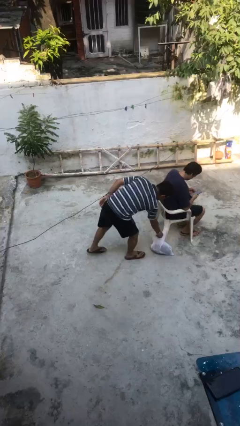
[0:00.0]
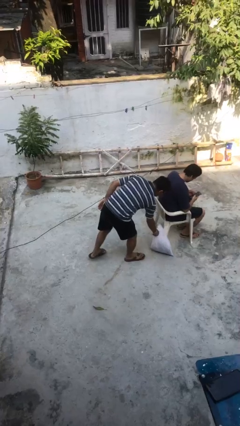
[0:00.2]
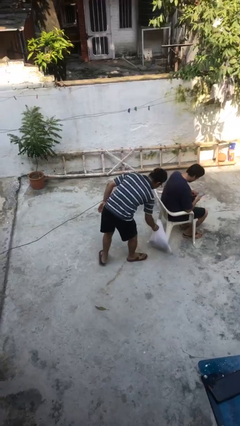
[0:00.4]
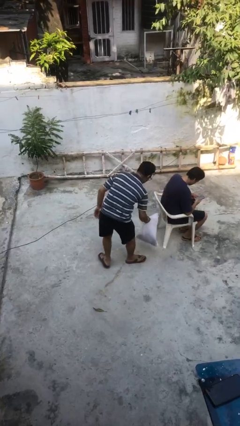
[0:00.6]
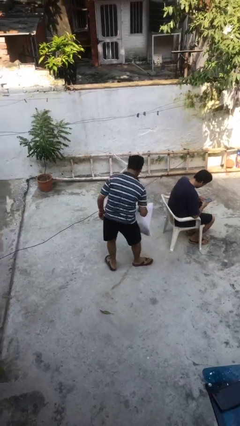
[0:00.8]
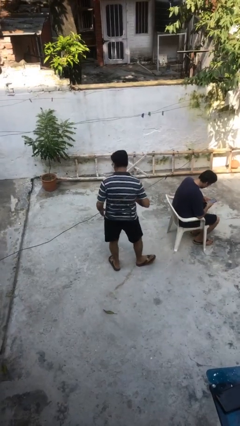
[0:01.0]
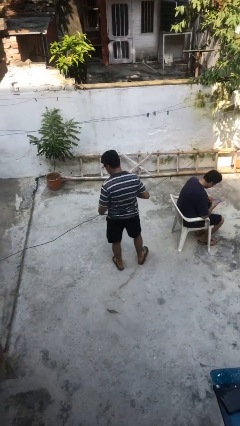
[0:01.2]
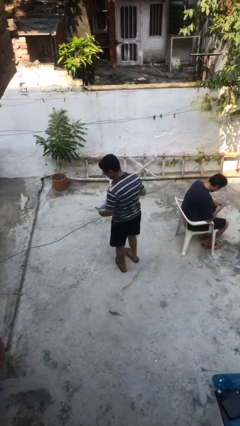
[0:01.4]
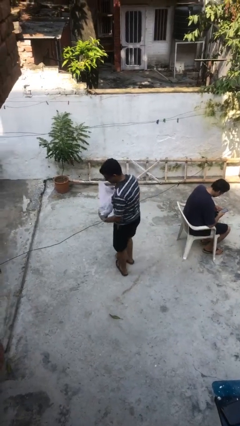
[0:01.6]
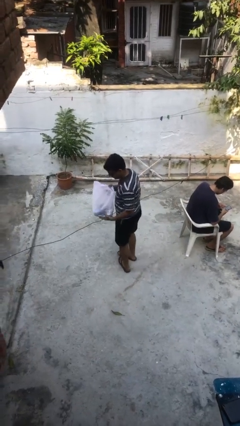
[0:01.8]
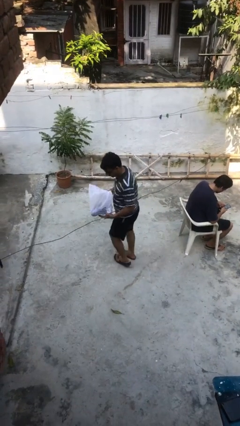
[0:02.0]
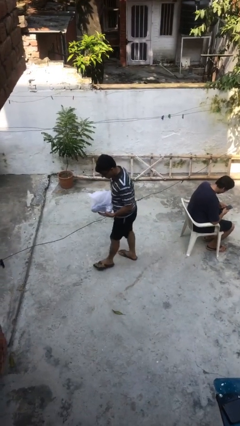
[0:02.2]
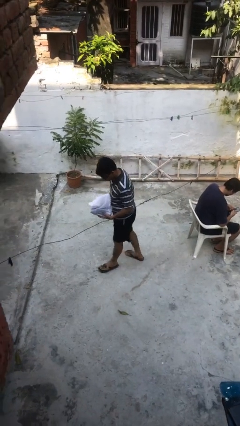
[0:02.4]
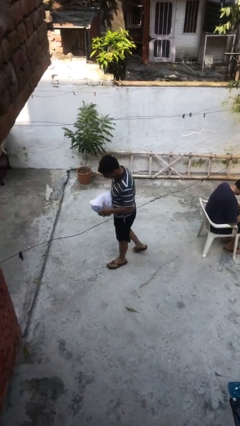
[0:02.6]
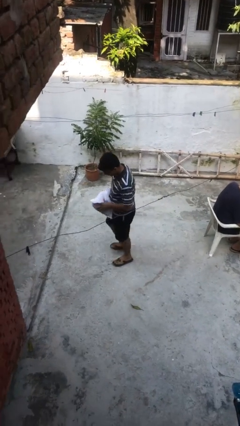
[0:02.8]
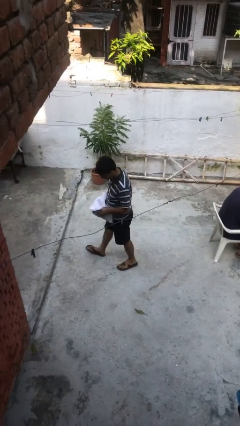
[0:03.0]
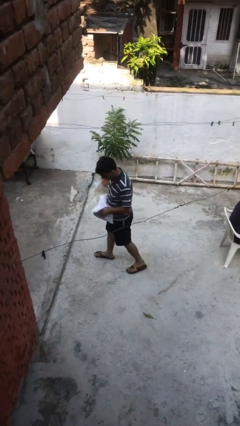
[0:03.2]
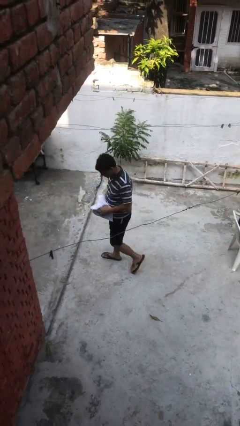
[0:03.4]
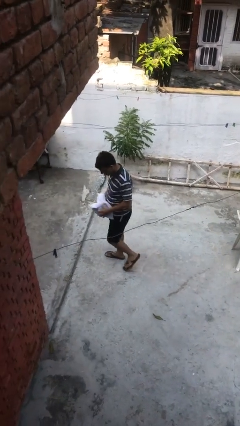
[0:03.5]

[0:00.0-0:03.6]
person steals object from person

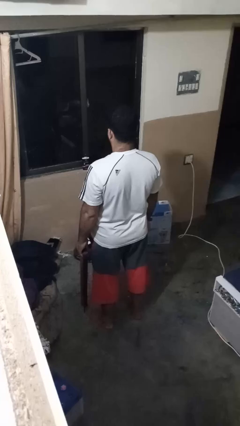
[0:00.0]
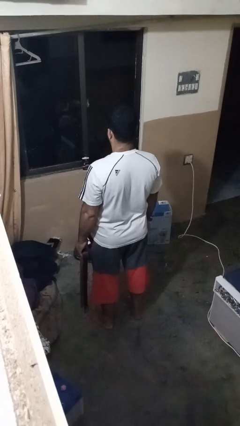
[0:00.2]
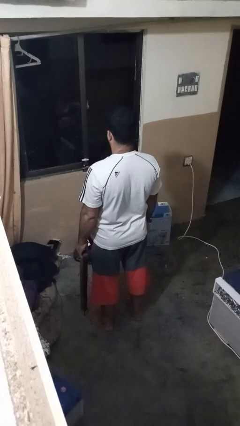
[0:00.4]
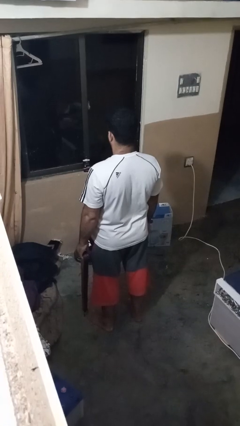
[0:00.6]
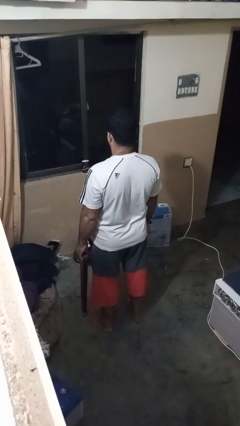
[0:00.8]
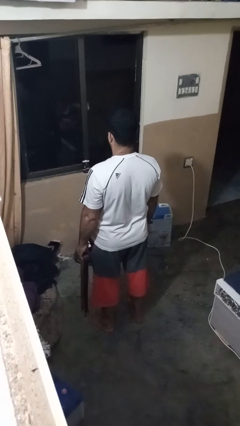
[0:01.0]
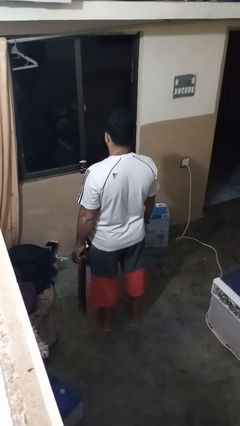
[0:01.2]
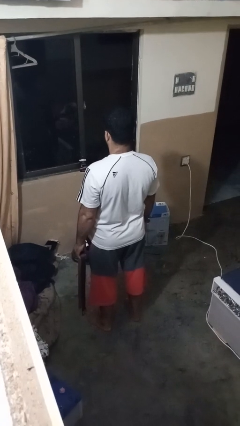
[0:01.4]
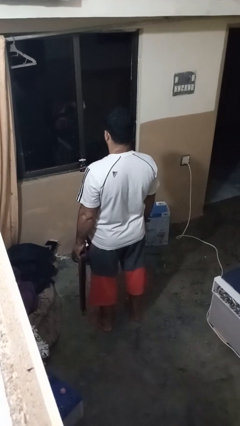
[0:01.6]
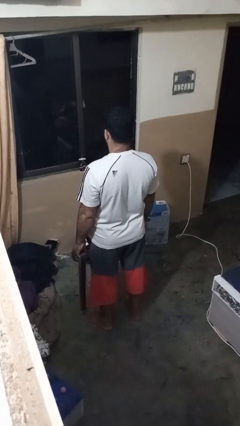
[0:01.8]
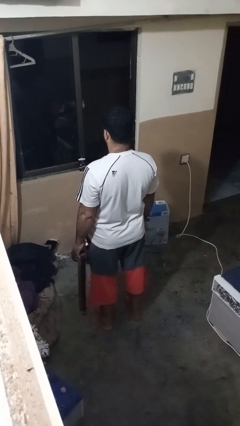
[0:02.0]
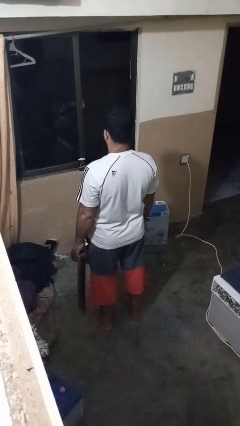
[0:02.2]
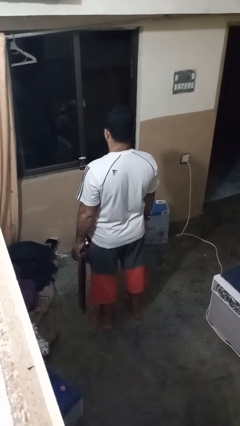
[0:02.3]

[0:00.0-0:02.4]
person takes off belt

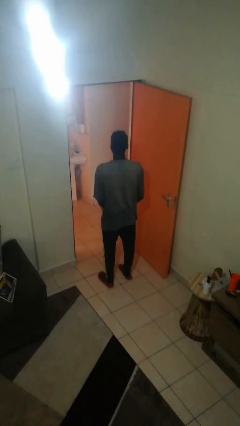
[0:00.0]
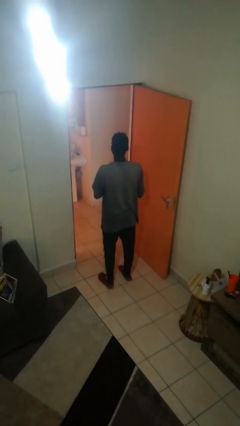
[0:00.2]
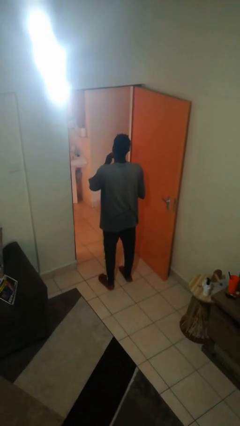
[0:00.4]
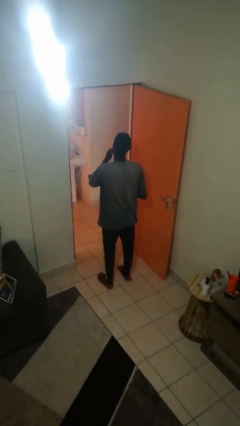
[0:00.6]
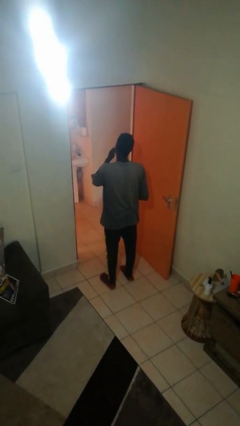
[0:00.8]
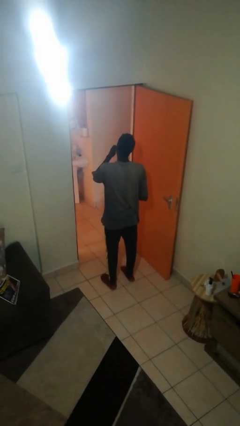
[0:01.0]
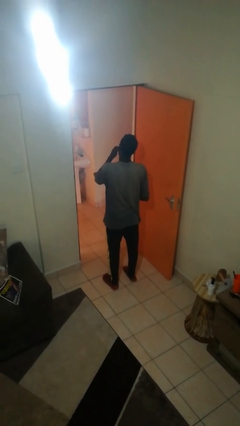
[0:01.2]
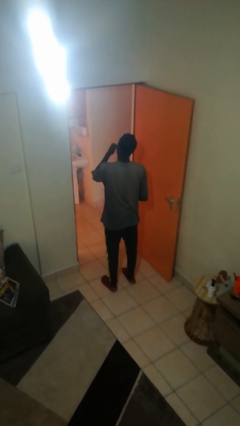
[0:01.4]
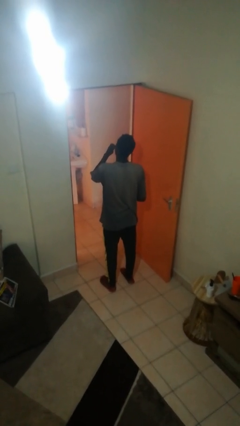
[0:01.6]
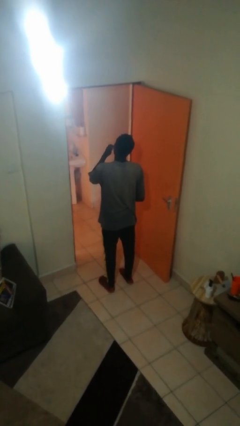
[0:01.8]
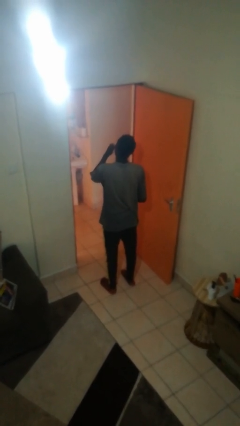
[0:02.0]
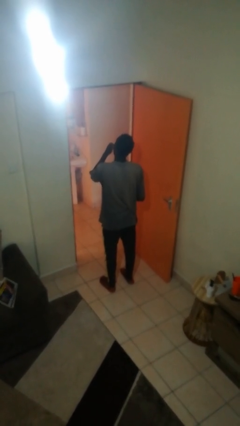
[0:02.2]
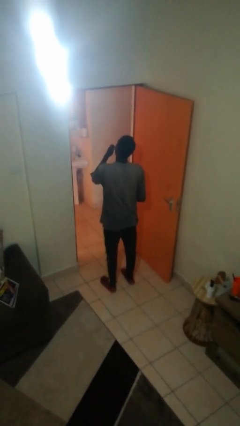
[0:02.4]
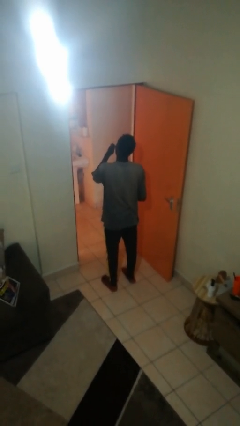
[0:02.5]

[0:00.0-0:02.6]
person brushes teeth

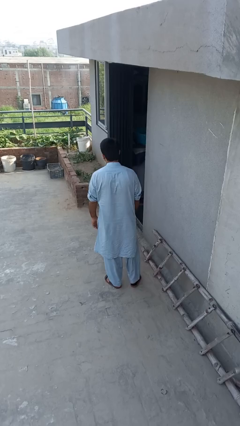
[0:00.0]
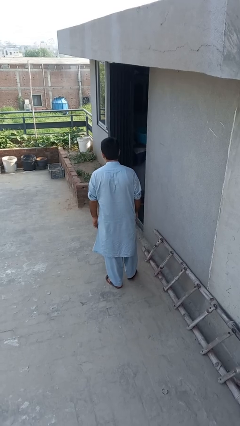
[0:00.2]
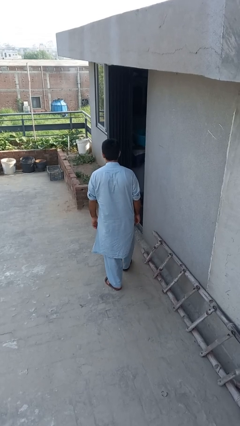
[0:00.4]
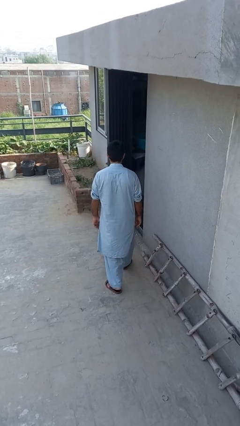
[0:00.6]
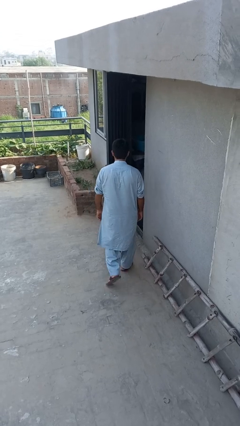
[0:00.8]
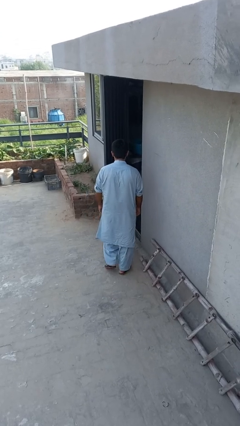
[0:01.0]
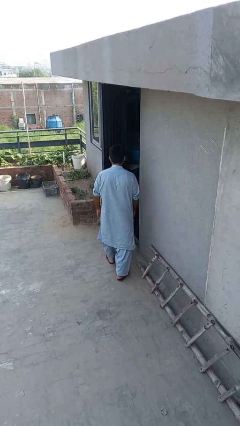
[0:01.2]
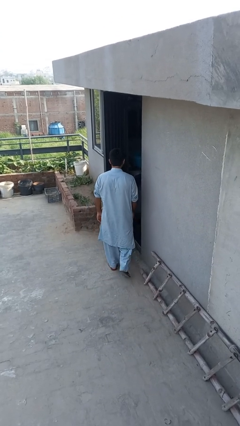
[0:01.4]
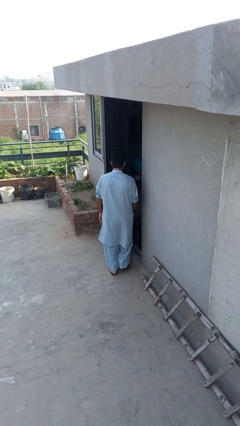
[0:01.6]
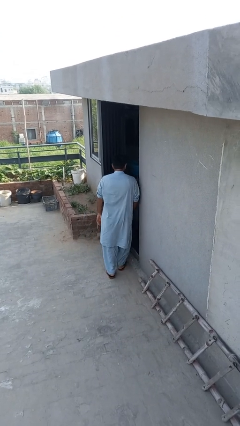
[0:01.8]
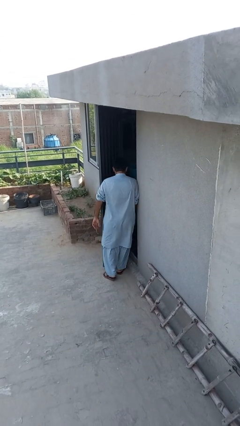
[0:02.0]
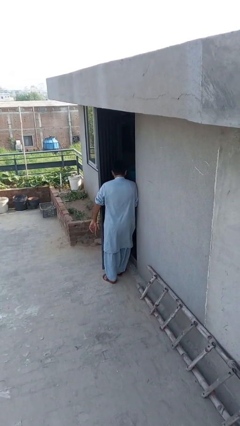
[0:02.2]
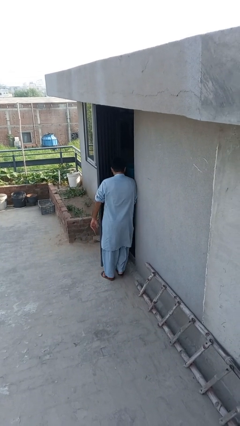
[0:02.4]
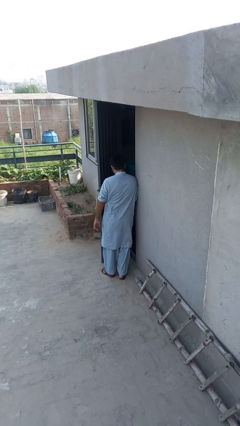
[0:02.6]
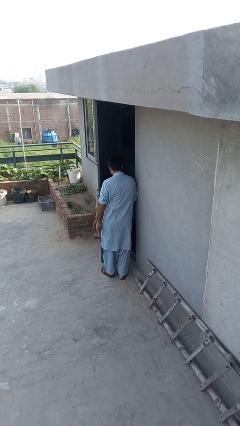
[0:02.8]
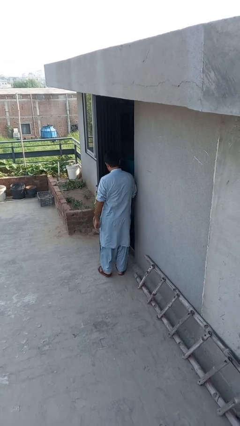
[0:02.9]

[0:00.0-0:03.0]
person bumps into wall

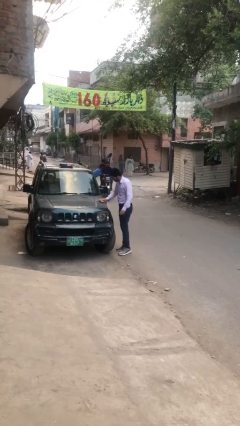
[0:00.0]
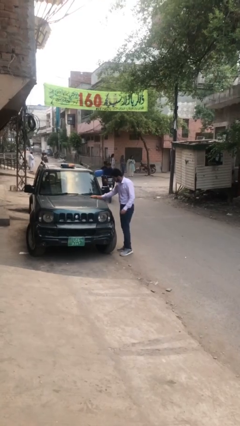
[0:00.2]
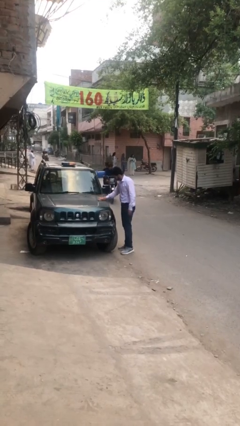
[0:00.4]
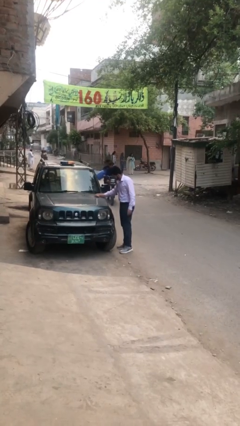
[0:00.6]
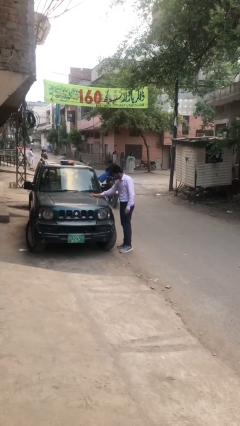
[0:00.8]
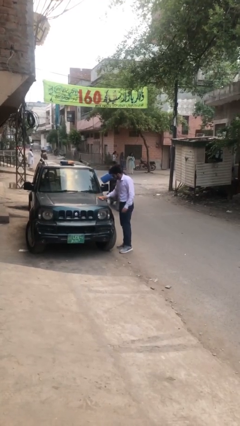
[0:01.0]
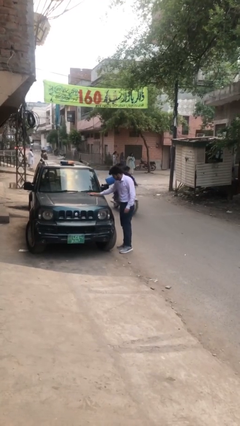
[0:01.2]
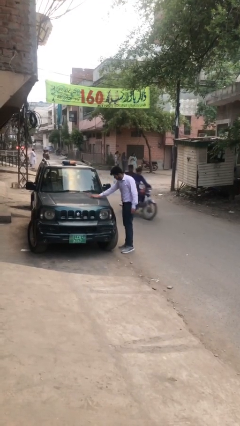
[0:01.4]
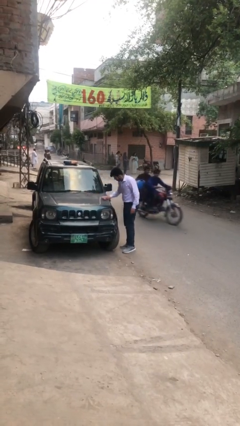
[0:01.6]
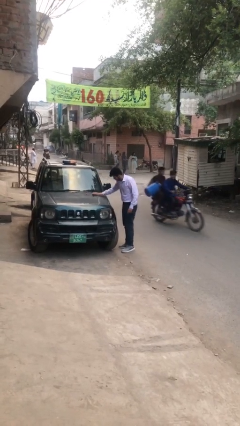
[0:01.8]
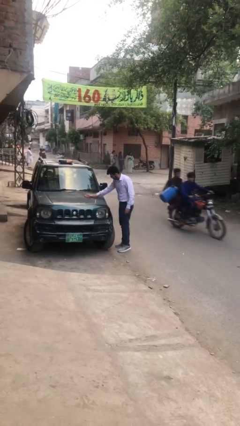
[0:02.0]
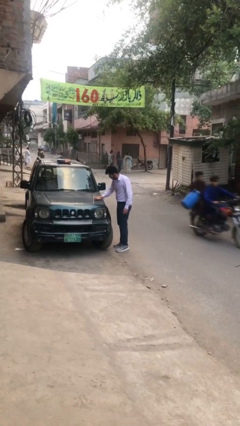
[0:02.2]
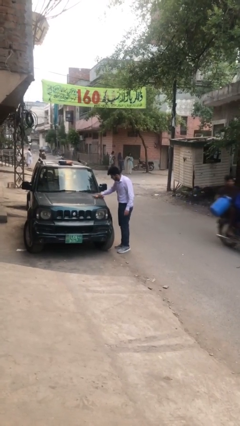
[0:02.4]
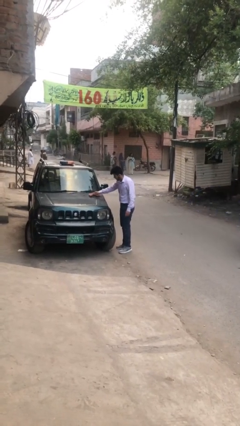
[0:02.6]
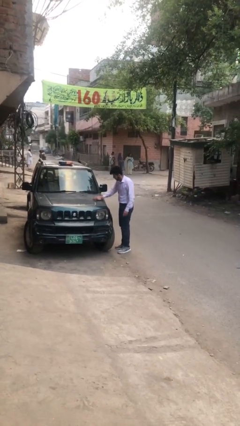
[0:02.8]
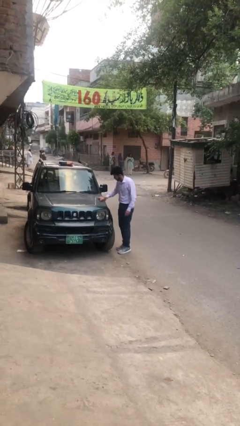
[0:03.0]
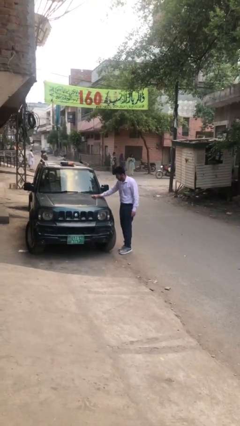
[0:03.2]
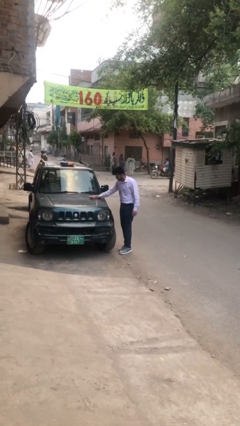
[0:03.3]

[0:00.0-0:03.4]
person polishes car with rag

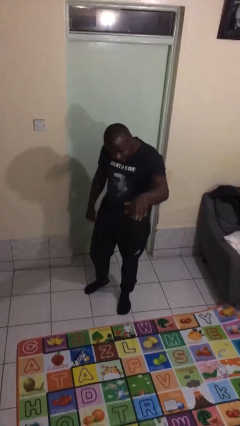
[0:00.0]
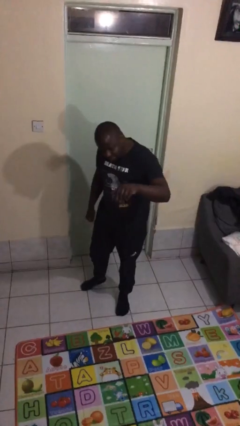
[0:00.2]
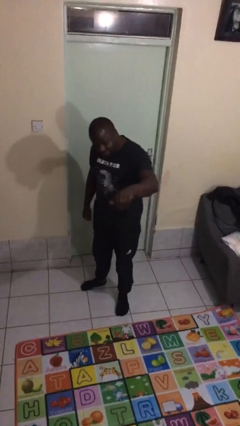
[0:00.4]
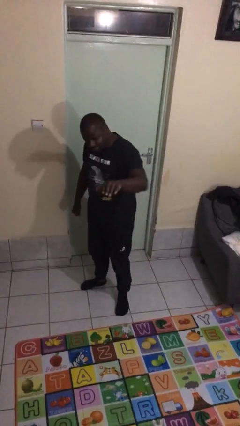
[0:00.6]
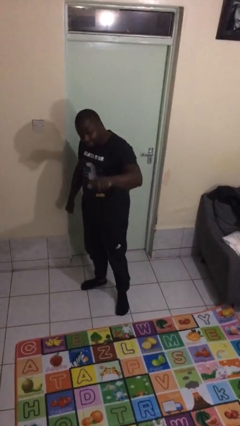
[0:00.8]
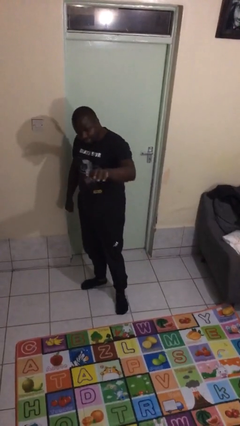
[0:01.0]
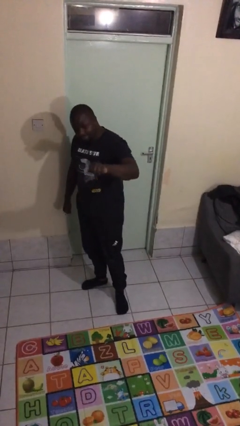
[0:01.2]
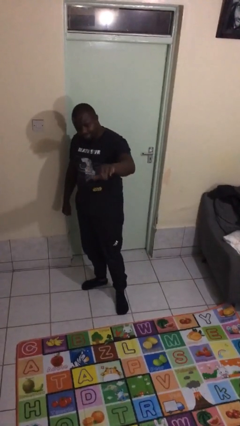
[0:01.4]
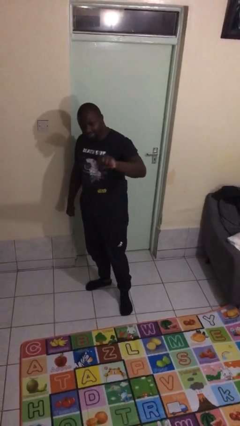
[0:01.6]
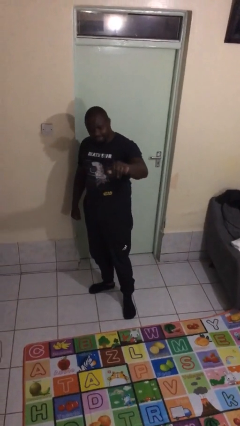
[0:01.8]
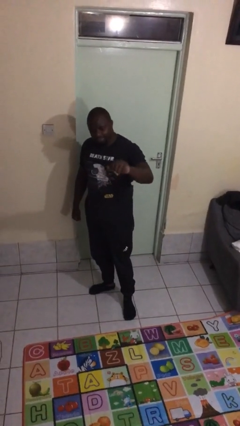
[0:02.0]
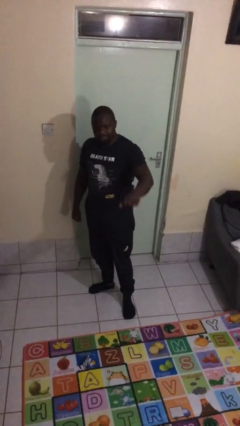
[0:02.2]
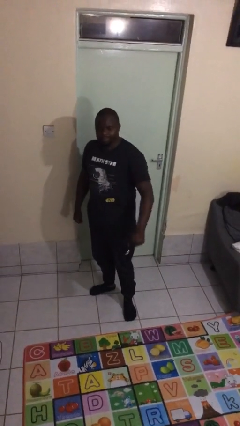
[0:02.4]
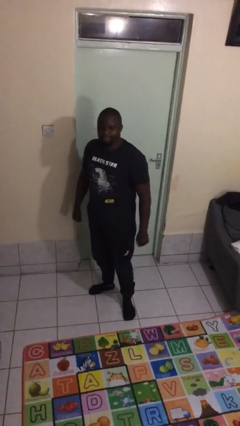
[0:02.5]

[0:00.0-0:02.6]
person gestures come here
